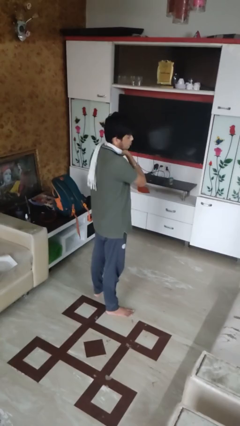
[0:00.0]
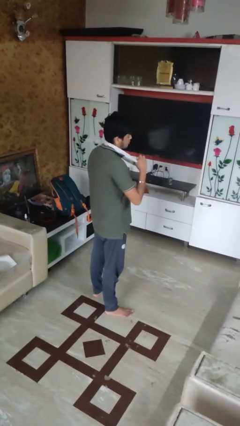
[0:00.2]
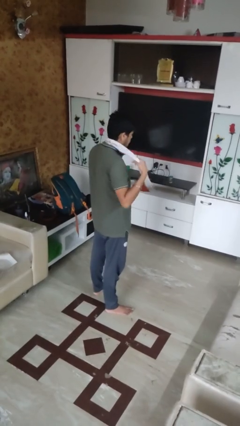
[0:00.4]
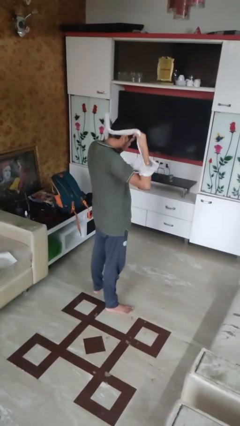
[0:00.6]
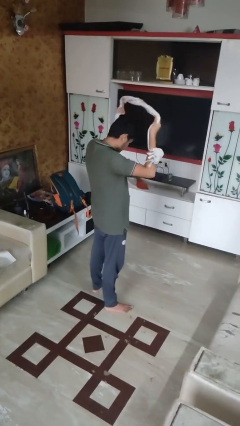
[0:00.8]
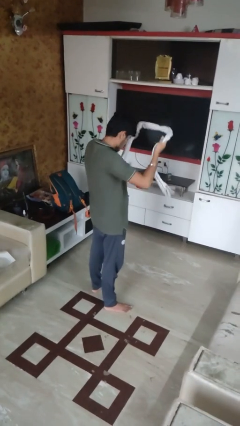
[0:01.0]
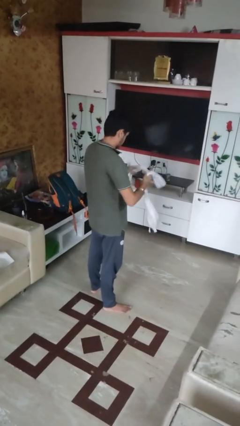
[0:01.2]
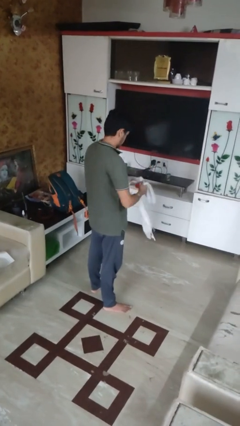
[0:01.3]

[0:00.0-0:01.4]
person takes off scarf

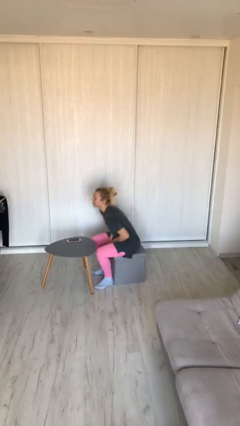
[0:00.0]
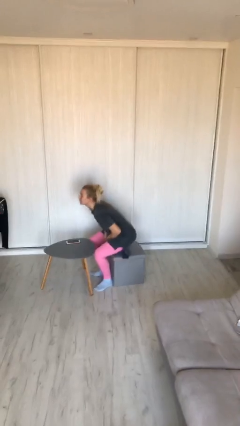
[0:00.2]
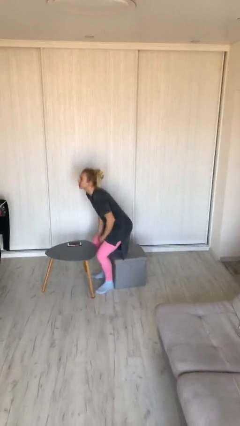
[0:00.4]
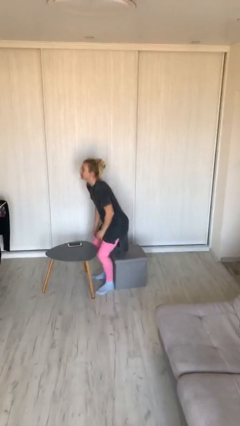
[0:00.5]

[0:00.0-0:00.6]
person stands up

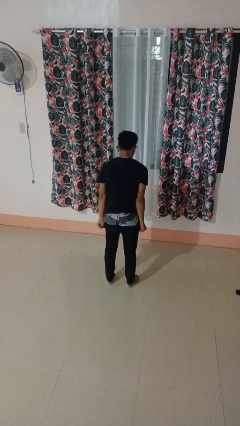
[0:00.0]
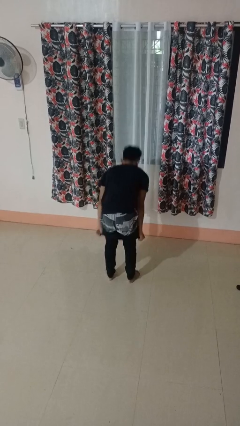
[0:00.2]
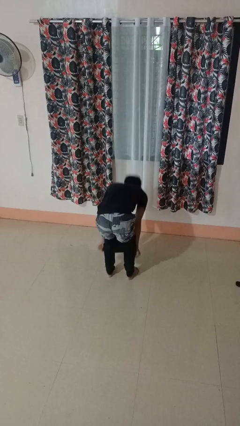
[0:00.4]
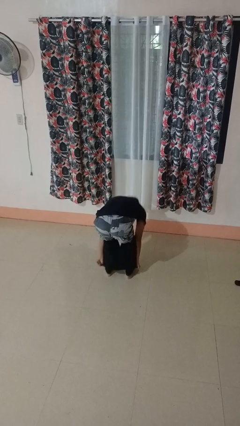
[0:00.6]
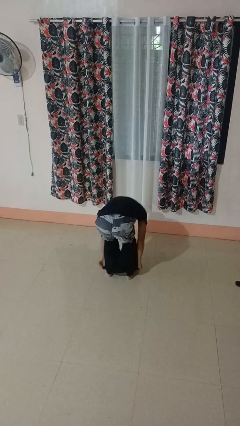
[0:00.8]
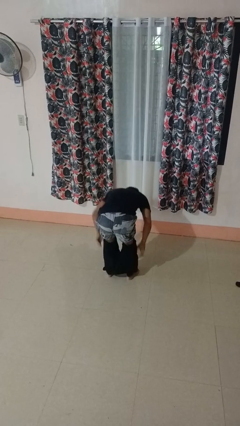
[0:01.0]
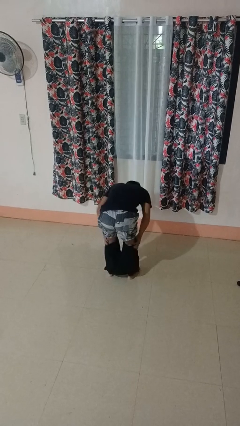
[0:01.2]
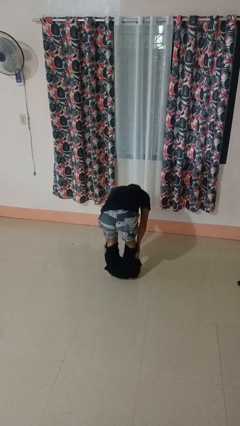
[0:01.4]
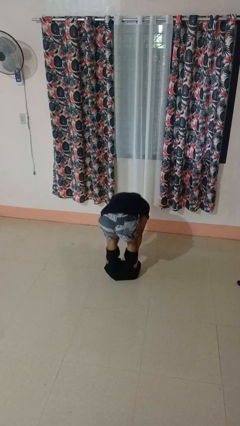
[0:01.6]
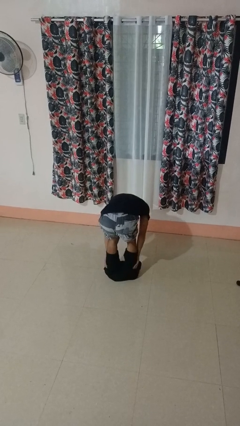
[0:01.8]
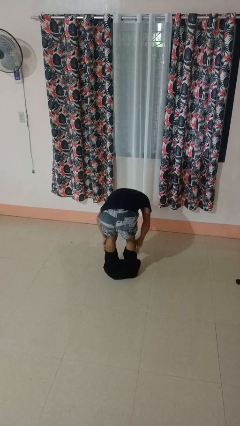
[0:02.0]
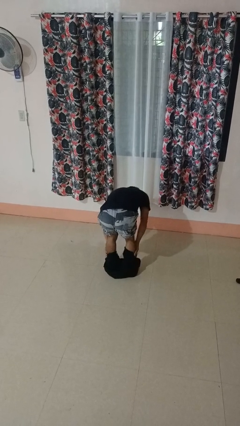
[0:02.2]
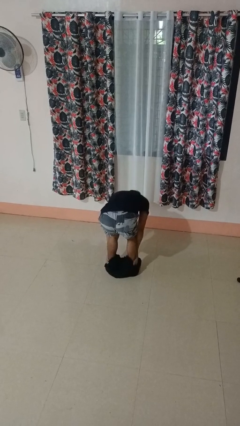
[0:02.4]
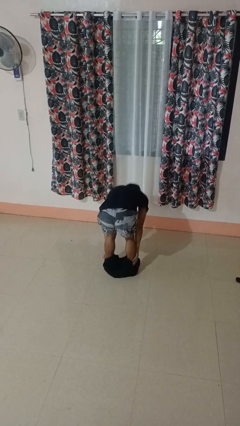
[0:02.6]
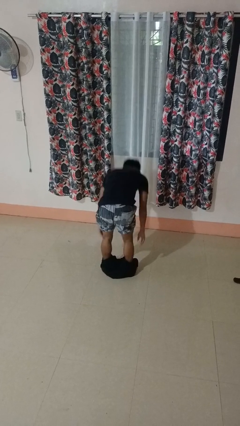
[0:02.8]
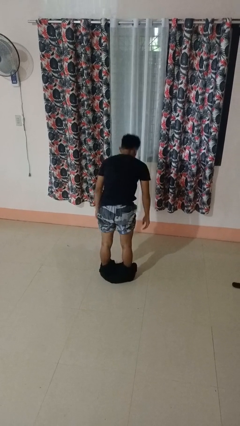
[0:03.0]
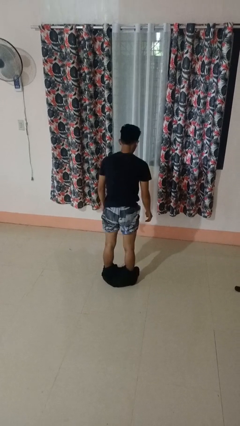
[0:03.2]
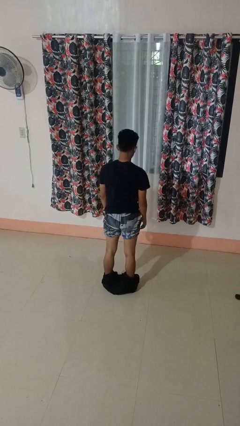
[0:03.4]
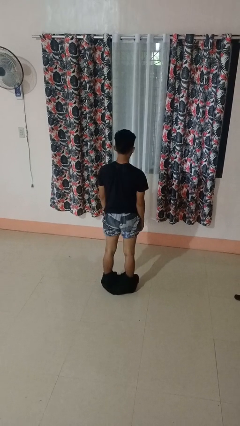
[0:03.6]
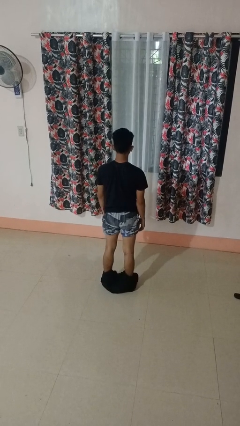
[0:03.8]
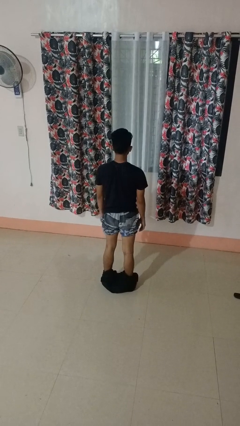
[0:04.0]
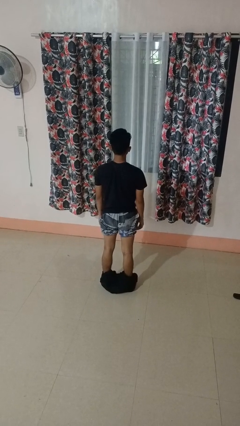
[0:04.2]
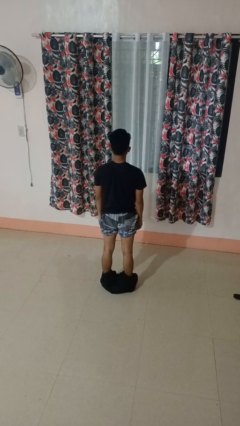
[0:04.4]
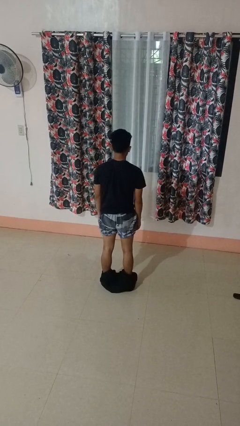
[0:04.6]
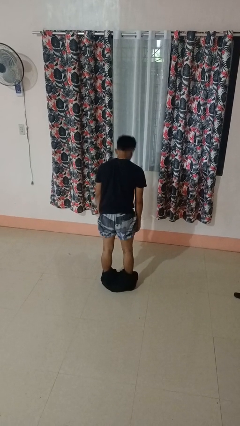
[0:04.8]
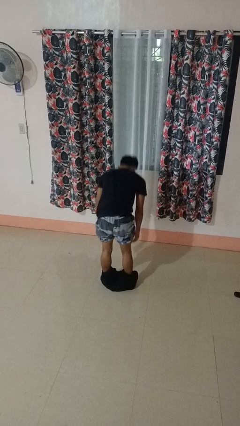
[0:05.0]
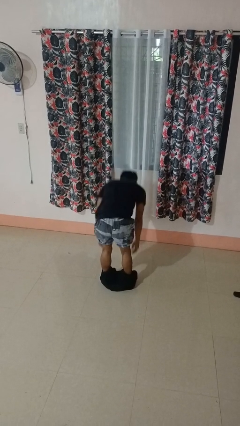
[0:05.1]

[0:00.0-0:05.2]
person takes off pants

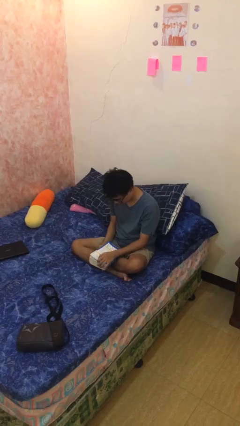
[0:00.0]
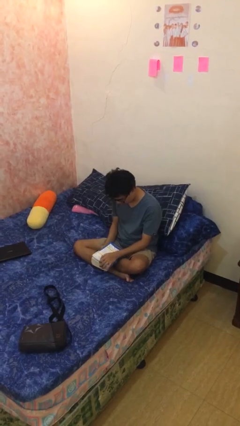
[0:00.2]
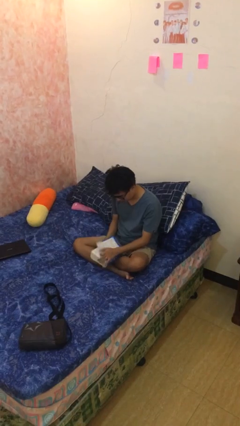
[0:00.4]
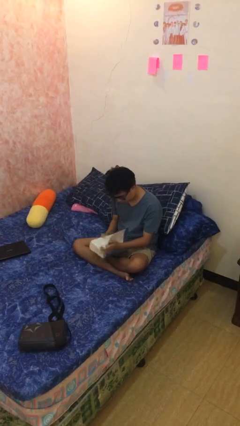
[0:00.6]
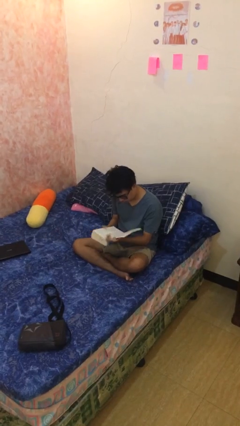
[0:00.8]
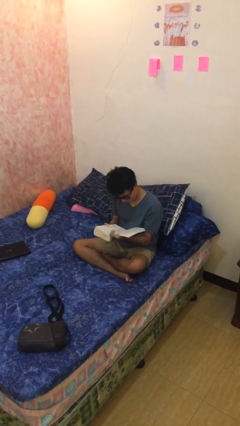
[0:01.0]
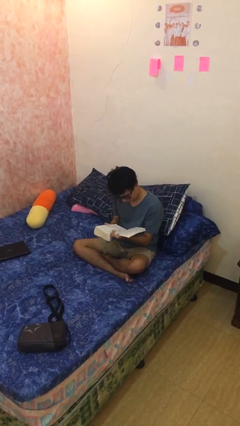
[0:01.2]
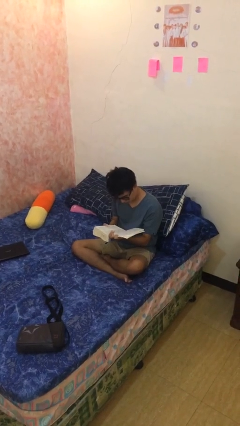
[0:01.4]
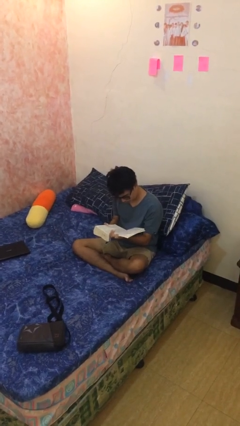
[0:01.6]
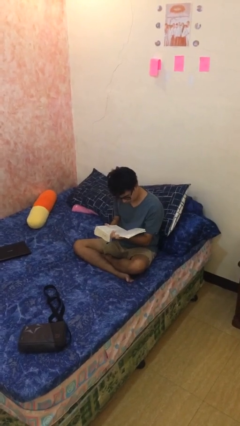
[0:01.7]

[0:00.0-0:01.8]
person reads document

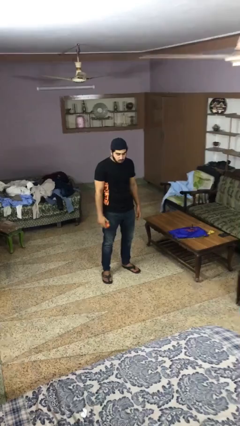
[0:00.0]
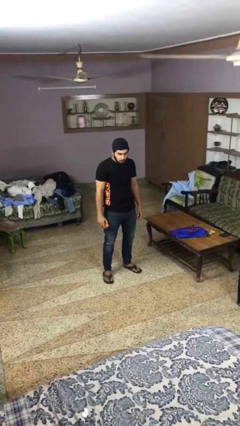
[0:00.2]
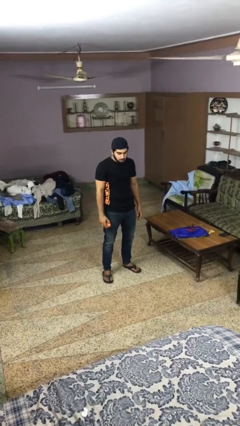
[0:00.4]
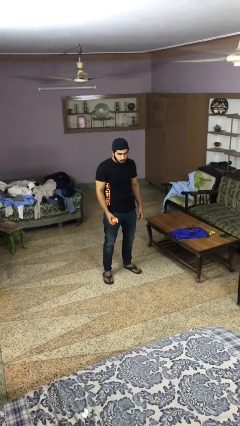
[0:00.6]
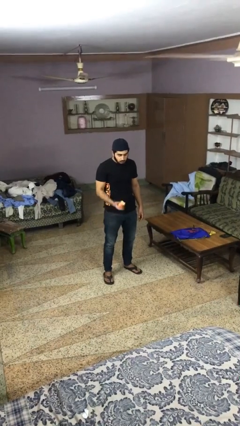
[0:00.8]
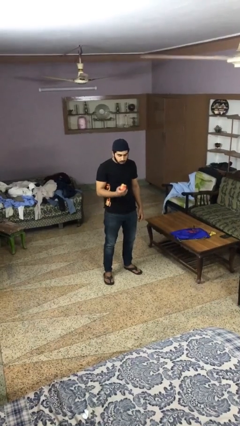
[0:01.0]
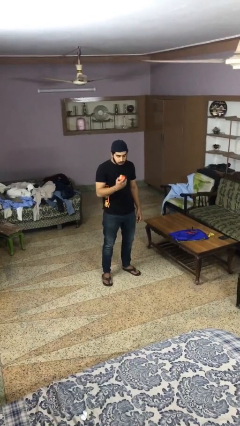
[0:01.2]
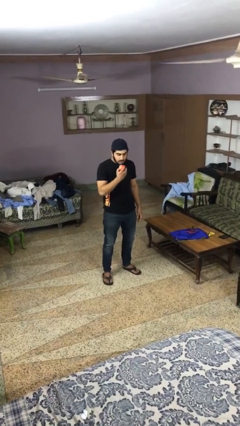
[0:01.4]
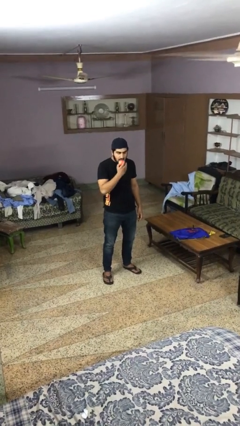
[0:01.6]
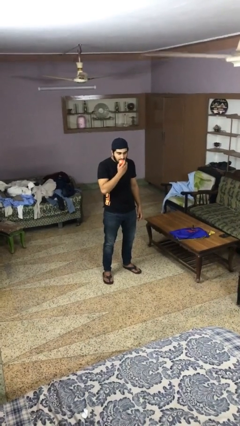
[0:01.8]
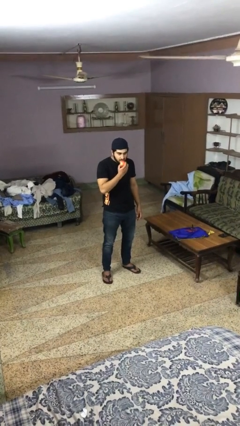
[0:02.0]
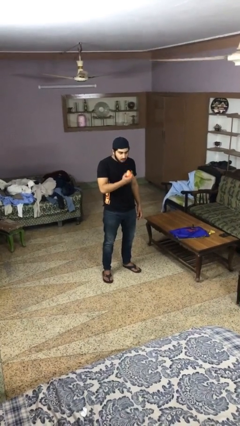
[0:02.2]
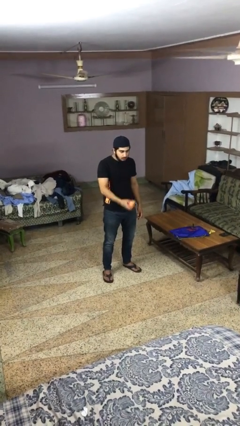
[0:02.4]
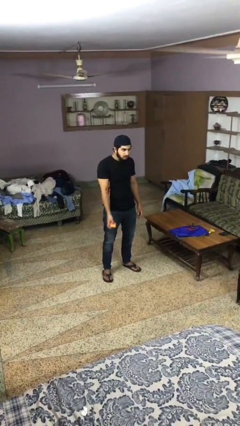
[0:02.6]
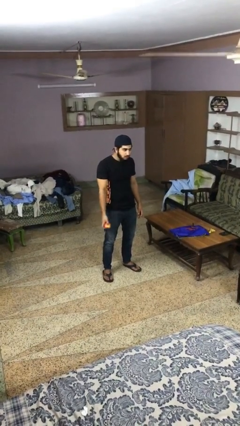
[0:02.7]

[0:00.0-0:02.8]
person eats apple

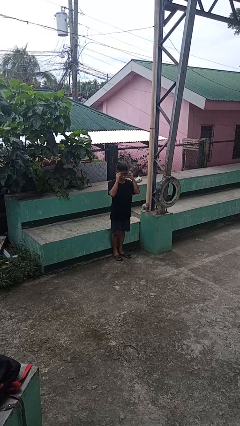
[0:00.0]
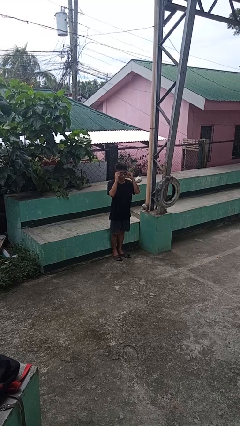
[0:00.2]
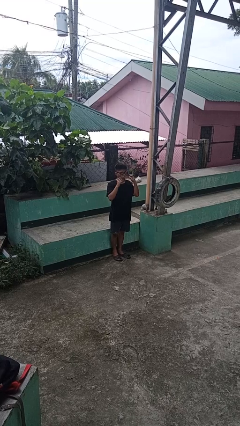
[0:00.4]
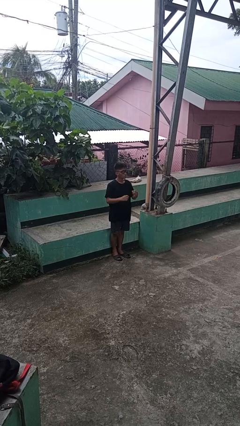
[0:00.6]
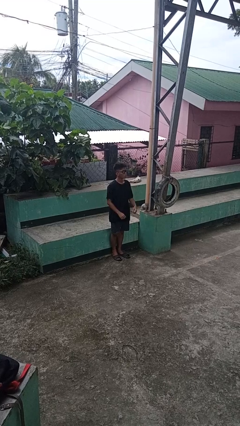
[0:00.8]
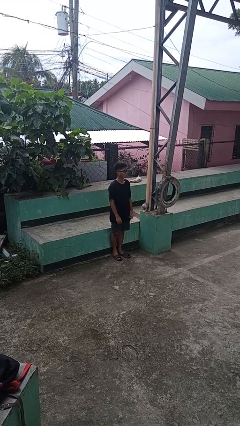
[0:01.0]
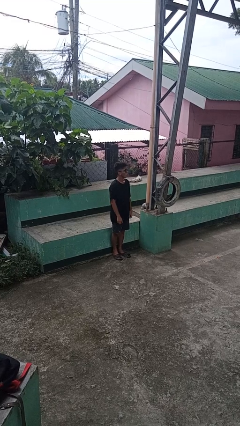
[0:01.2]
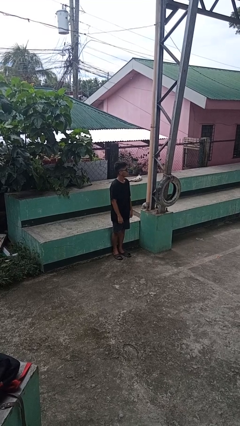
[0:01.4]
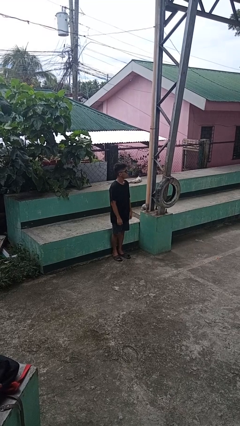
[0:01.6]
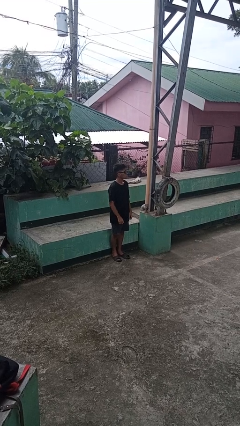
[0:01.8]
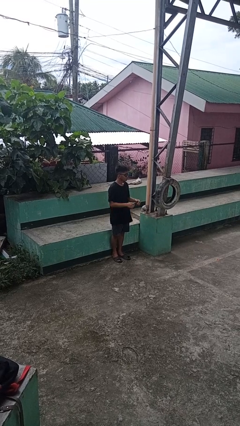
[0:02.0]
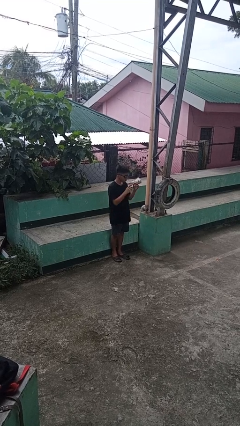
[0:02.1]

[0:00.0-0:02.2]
person puts on sunglasses

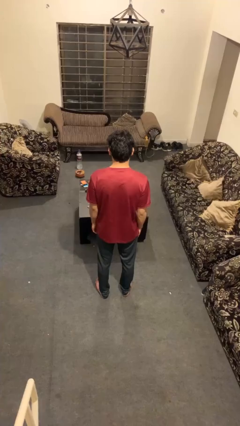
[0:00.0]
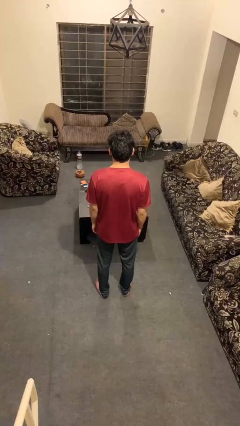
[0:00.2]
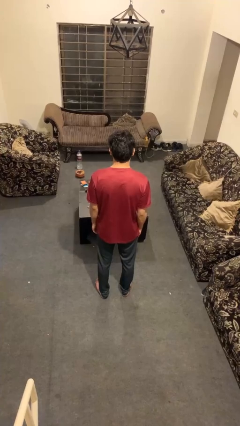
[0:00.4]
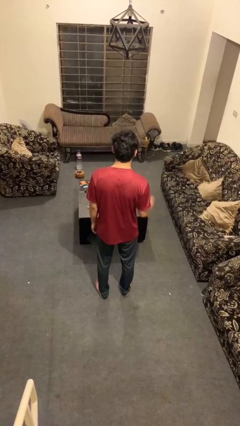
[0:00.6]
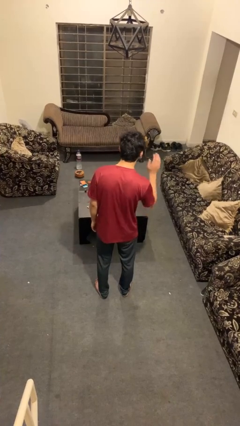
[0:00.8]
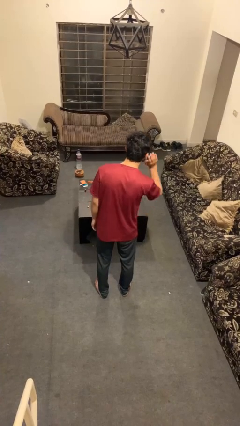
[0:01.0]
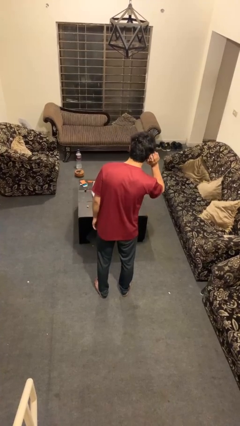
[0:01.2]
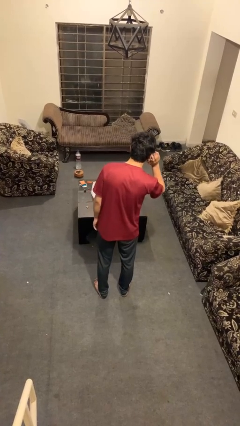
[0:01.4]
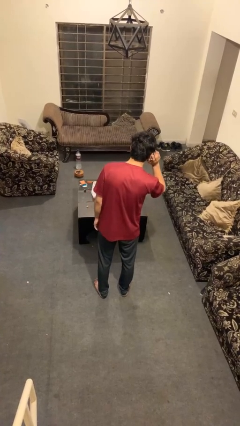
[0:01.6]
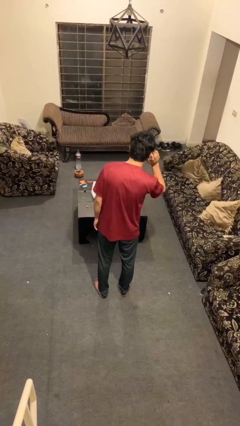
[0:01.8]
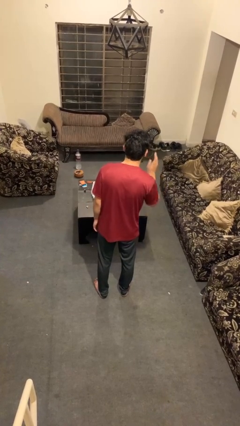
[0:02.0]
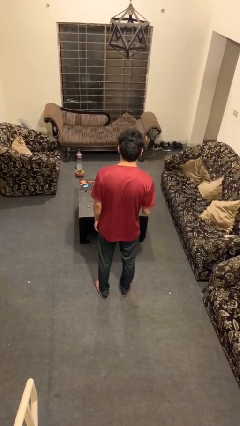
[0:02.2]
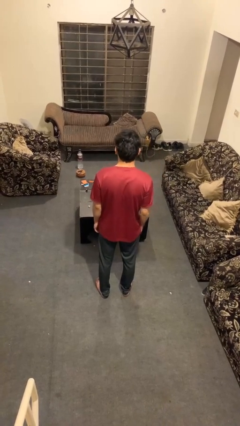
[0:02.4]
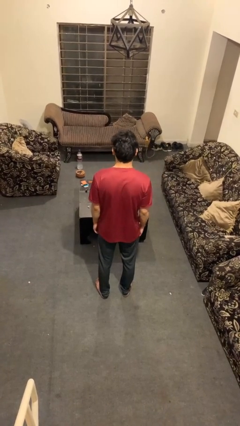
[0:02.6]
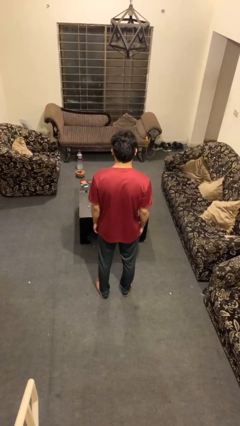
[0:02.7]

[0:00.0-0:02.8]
person gestures listen closely

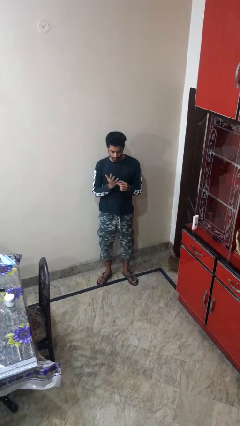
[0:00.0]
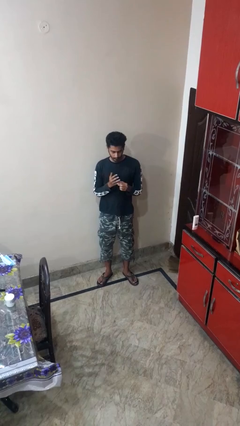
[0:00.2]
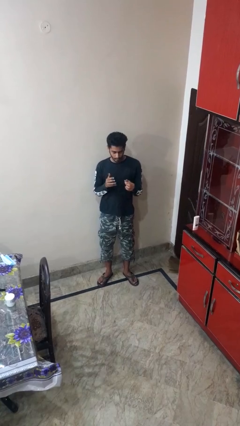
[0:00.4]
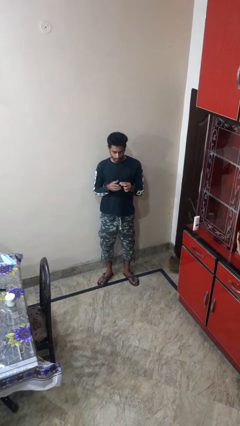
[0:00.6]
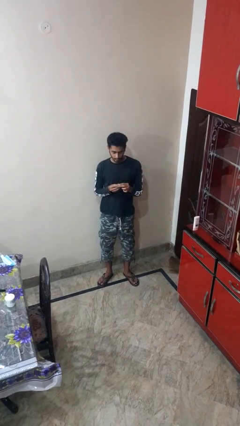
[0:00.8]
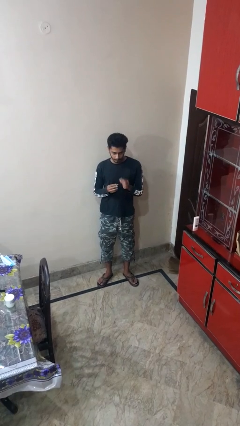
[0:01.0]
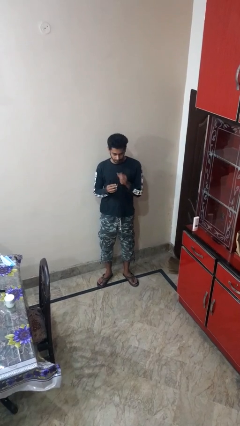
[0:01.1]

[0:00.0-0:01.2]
person takes off ring